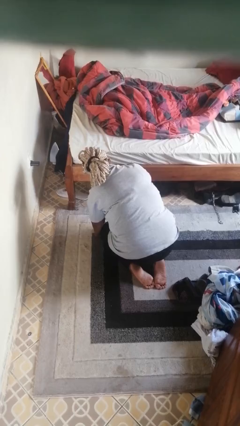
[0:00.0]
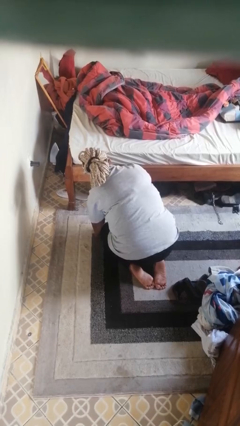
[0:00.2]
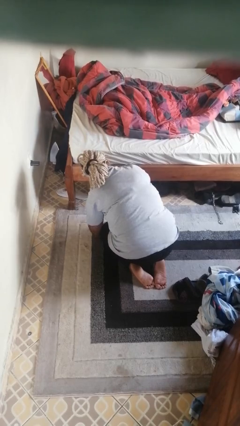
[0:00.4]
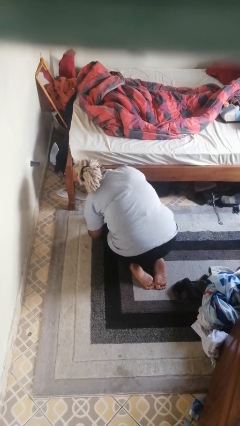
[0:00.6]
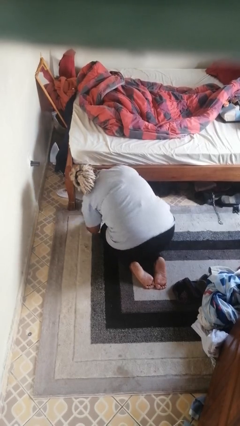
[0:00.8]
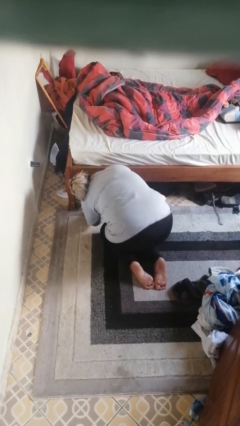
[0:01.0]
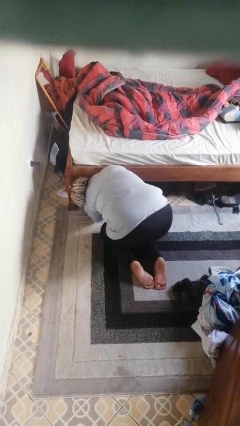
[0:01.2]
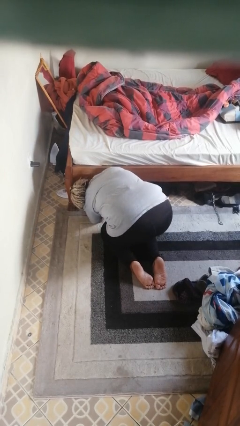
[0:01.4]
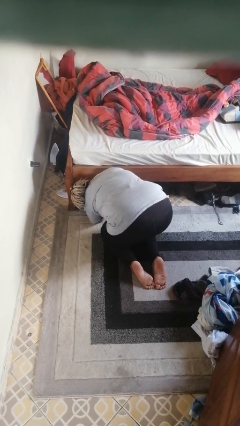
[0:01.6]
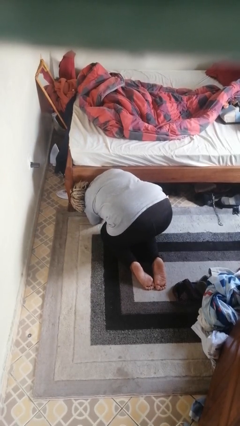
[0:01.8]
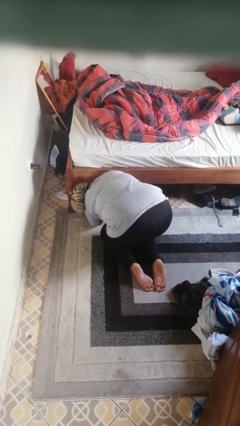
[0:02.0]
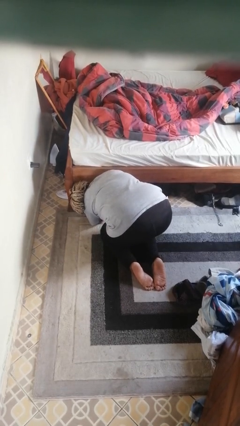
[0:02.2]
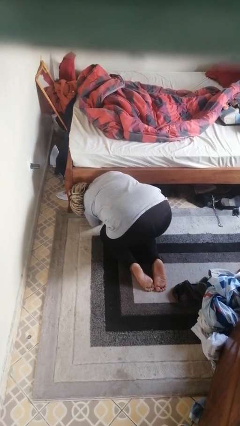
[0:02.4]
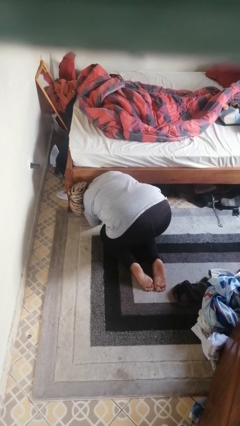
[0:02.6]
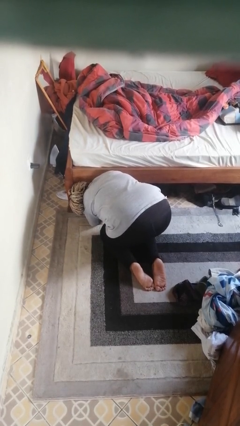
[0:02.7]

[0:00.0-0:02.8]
person searches under bed

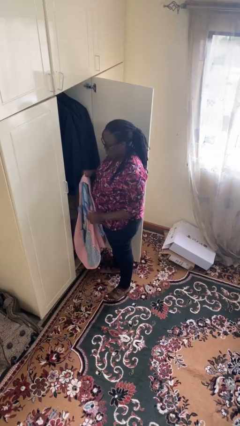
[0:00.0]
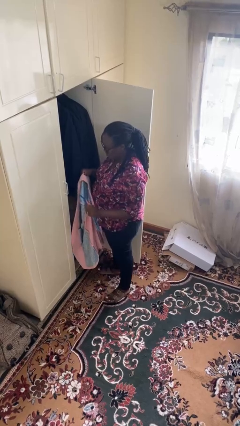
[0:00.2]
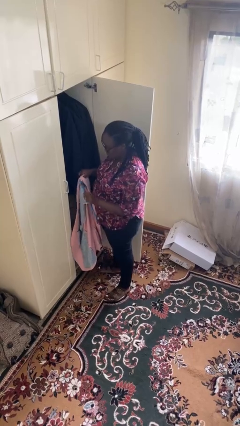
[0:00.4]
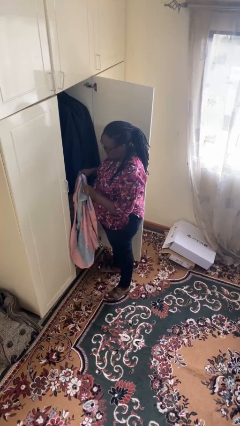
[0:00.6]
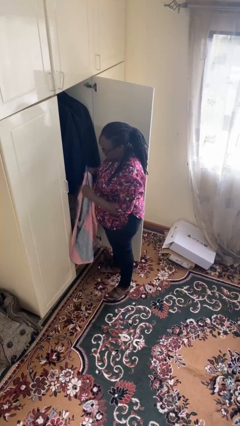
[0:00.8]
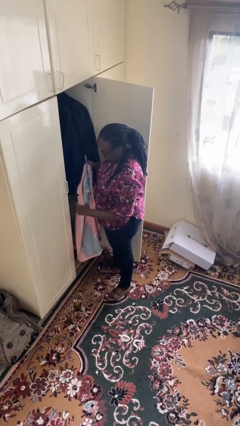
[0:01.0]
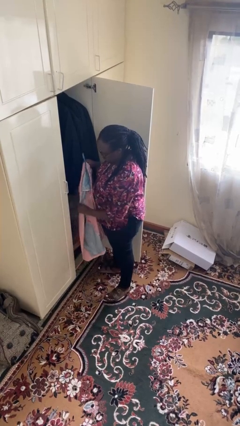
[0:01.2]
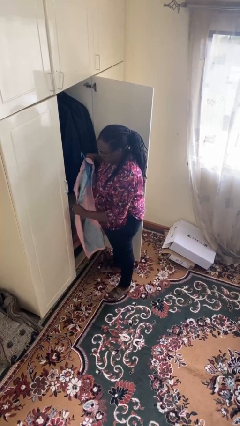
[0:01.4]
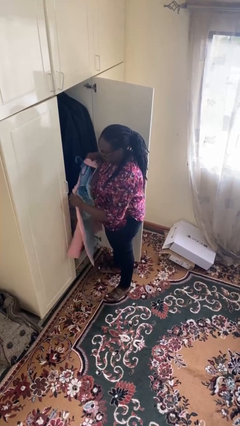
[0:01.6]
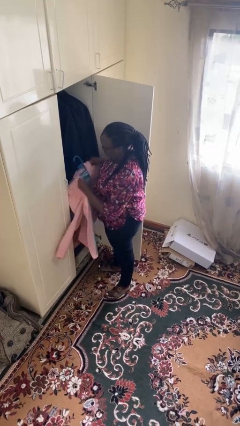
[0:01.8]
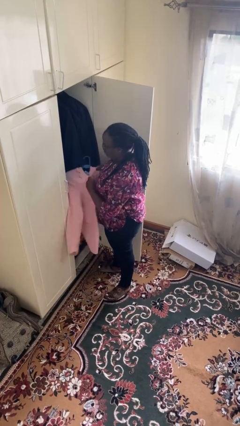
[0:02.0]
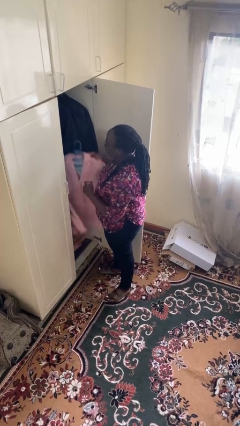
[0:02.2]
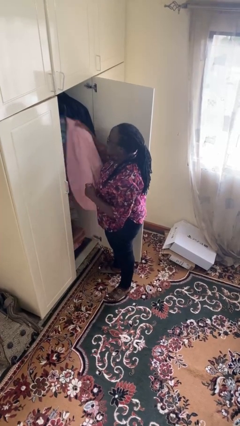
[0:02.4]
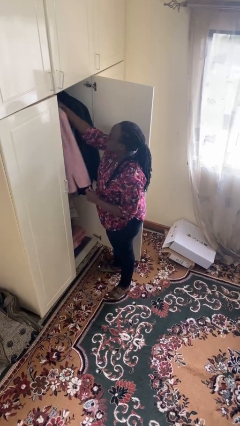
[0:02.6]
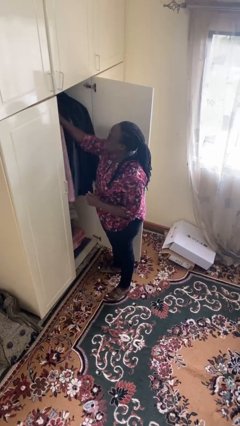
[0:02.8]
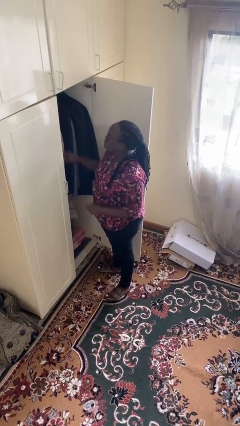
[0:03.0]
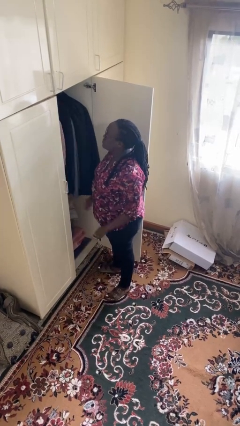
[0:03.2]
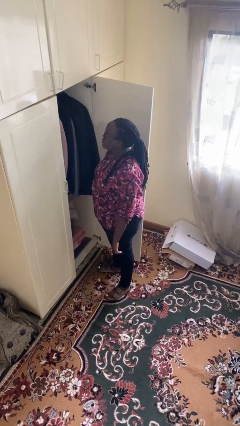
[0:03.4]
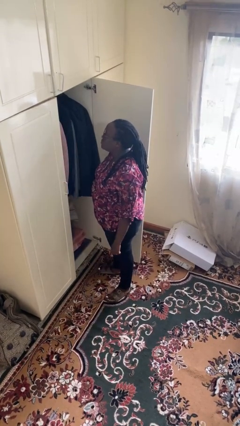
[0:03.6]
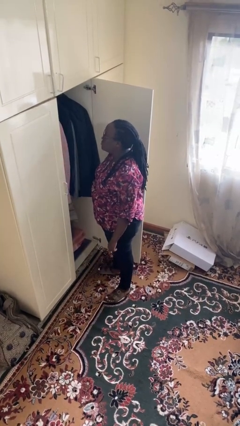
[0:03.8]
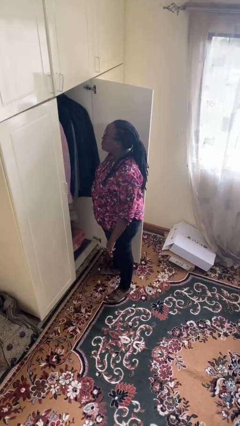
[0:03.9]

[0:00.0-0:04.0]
person puts clothes into closet

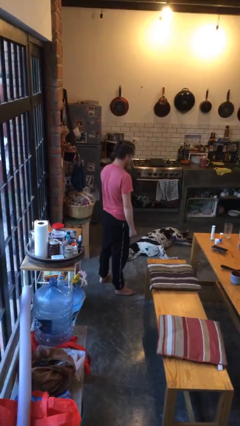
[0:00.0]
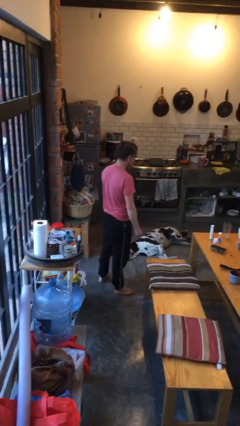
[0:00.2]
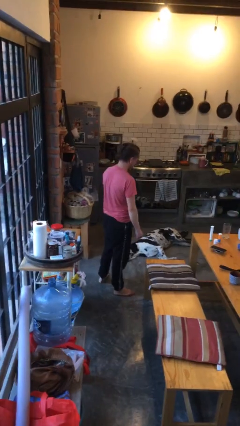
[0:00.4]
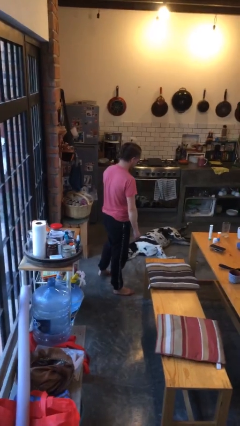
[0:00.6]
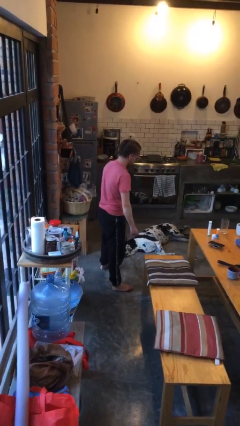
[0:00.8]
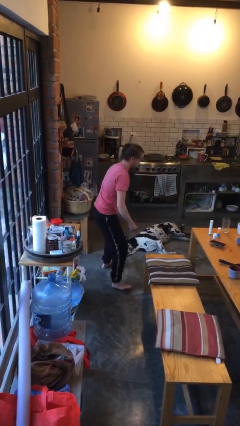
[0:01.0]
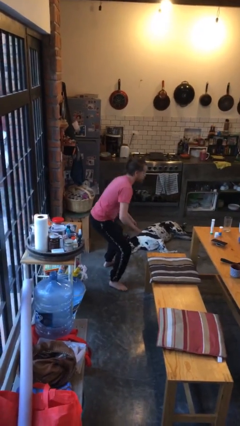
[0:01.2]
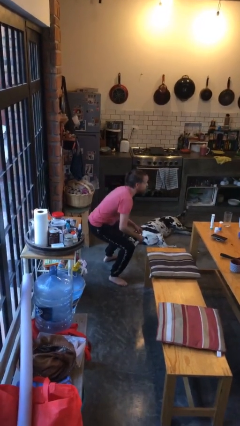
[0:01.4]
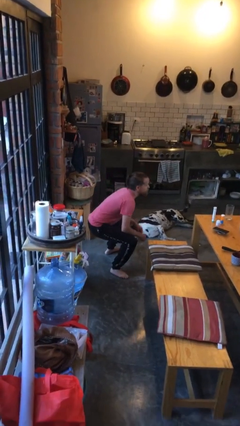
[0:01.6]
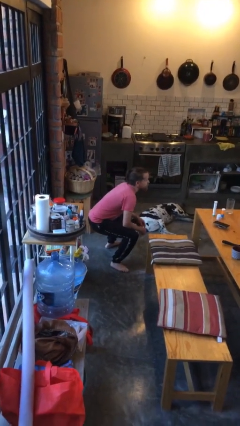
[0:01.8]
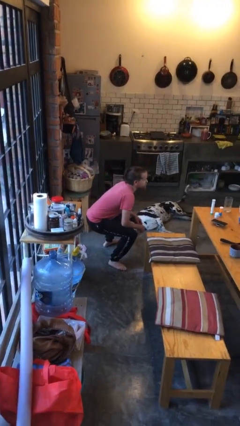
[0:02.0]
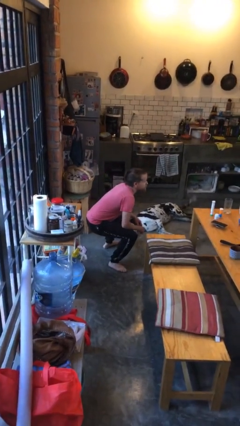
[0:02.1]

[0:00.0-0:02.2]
person squats

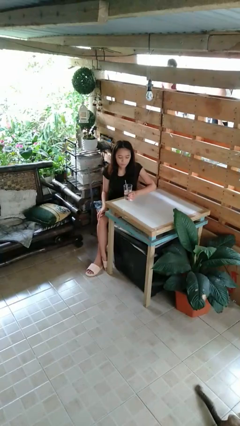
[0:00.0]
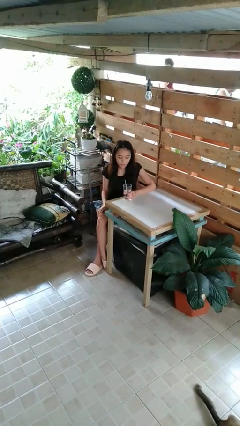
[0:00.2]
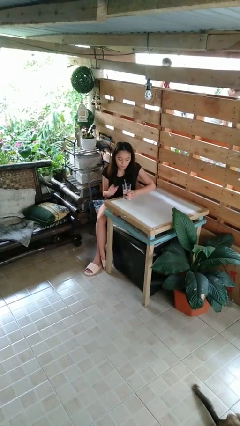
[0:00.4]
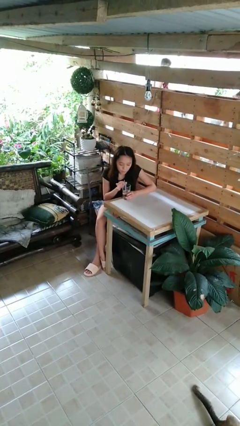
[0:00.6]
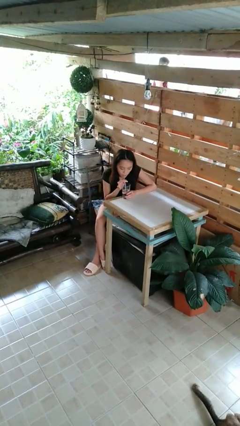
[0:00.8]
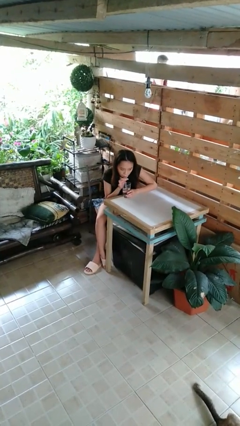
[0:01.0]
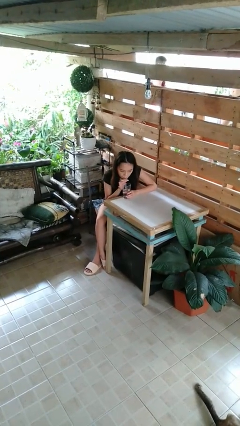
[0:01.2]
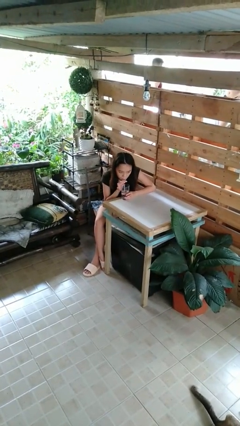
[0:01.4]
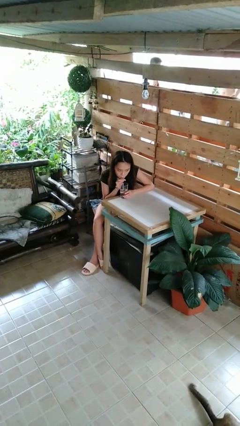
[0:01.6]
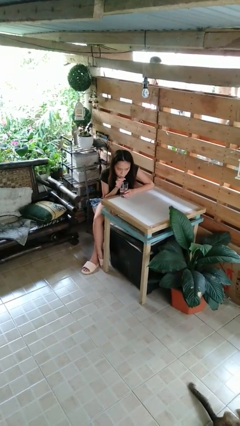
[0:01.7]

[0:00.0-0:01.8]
person drinks from straw

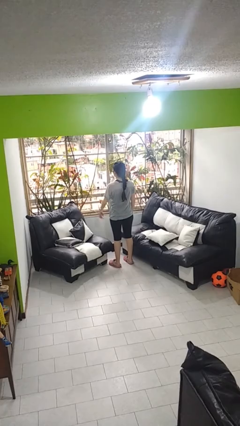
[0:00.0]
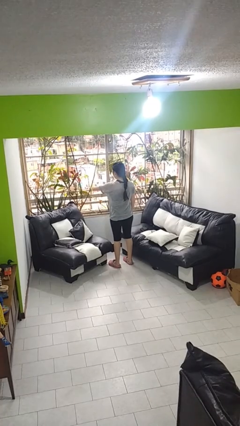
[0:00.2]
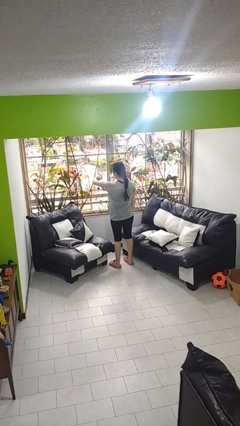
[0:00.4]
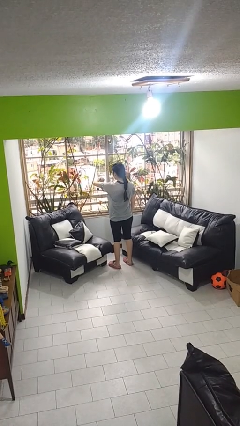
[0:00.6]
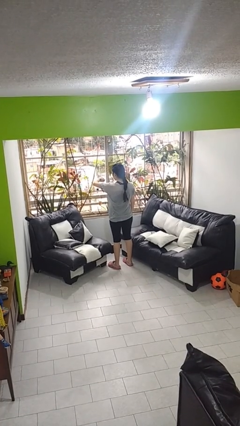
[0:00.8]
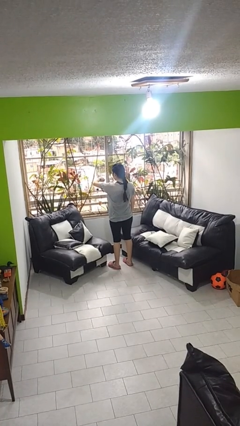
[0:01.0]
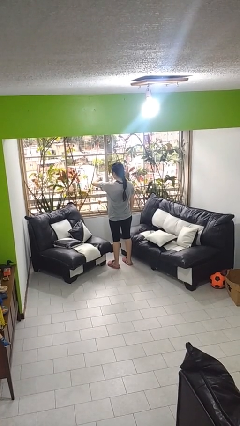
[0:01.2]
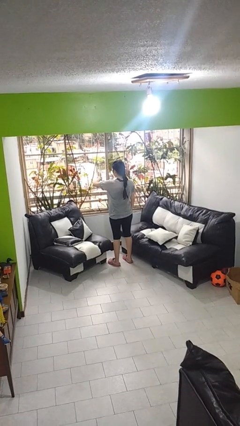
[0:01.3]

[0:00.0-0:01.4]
person looks at wristwatch

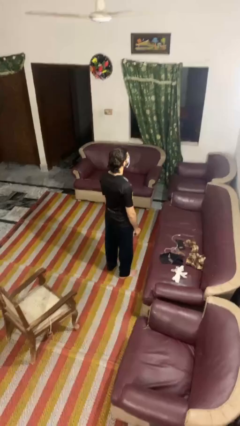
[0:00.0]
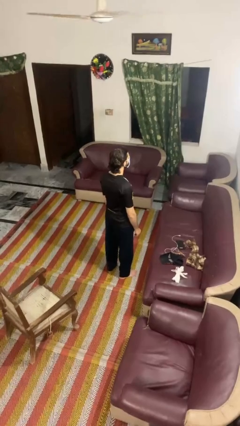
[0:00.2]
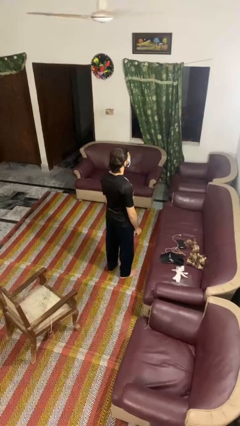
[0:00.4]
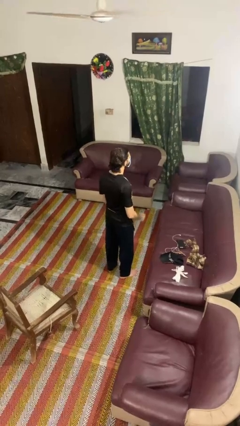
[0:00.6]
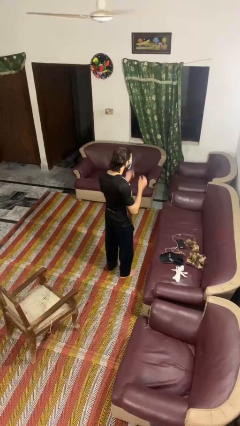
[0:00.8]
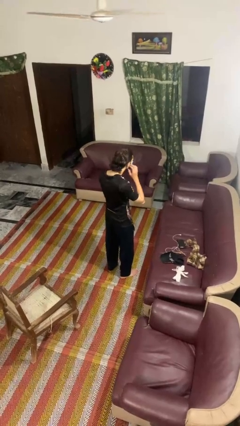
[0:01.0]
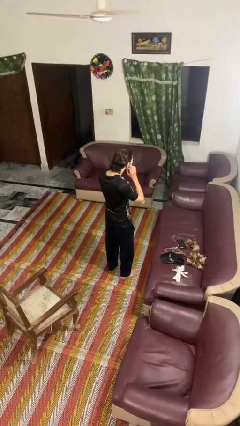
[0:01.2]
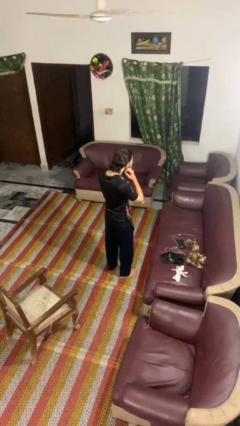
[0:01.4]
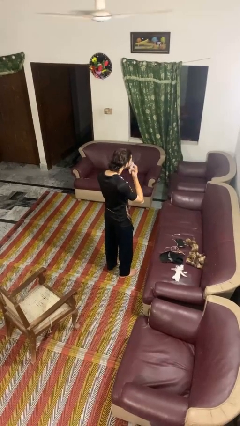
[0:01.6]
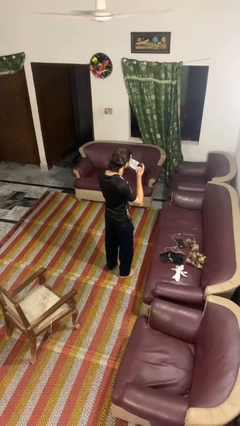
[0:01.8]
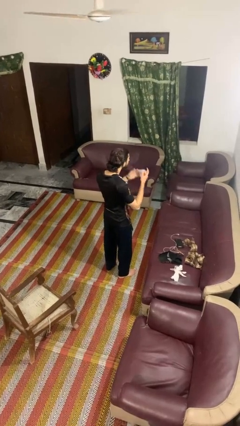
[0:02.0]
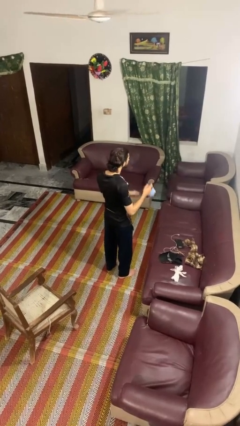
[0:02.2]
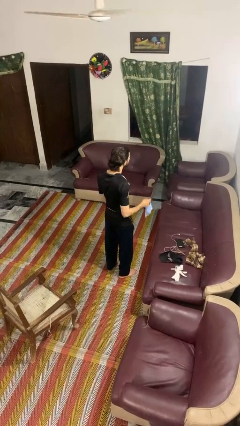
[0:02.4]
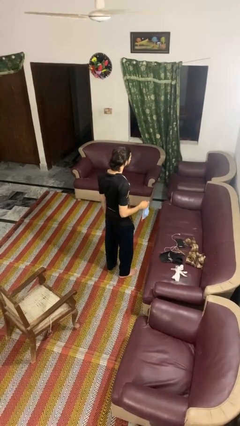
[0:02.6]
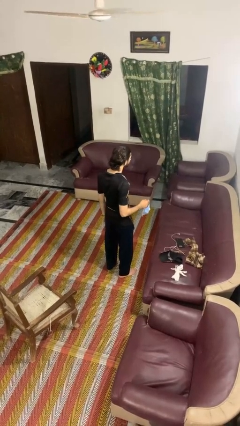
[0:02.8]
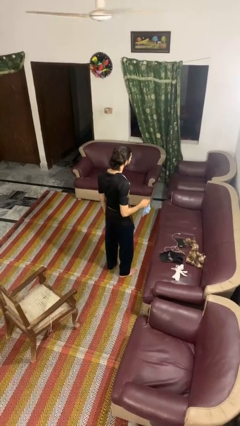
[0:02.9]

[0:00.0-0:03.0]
person takes off facemask

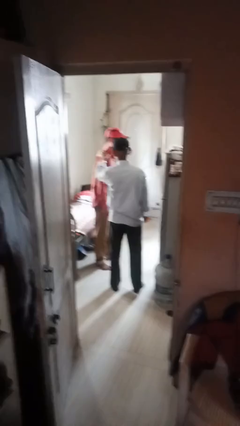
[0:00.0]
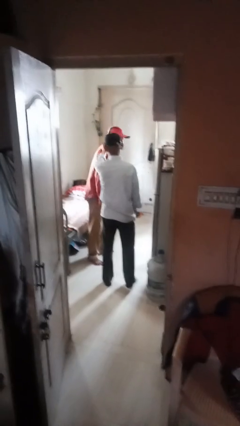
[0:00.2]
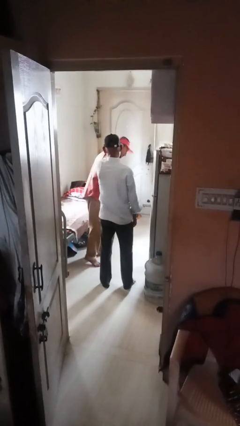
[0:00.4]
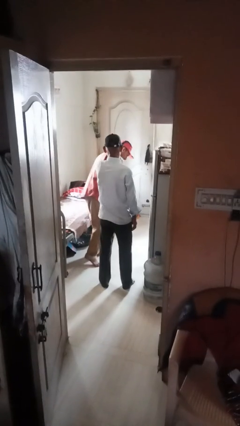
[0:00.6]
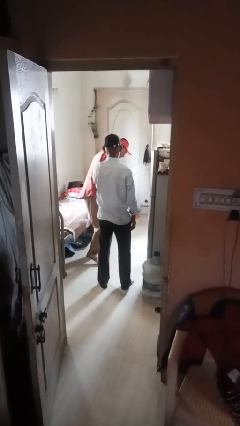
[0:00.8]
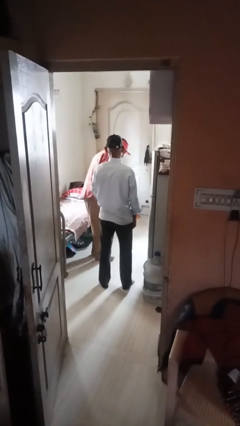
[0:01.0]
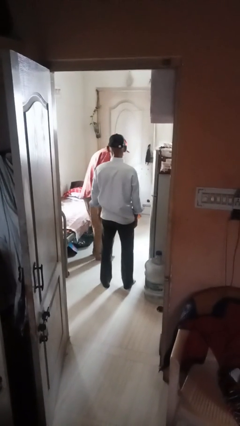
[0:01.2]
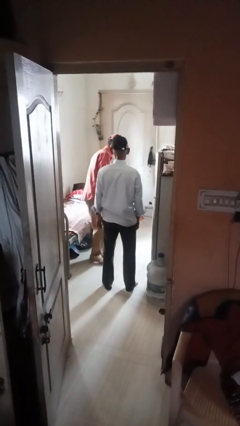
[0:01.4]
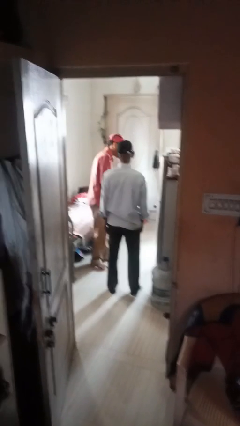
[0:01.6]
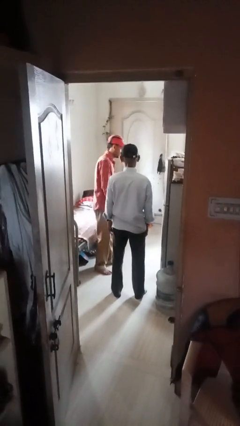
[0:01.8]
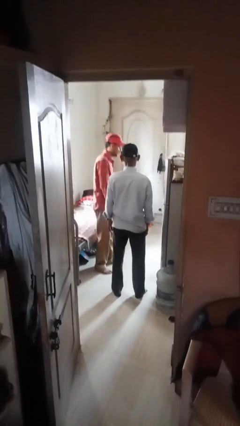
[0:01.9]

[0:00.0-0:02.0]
person shoves person

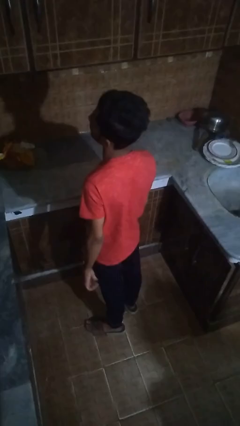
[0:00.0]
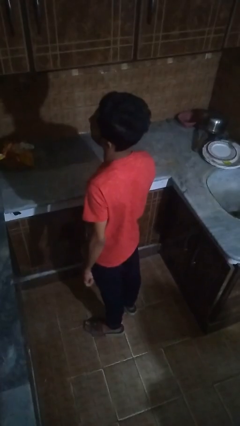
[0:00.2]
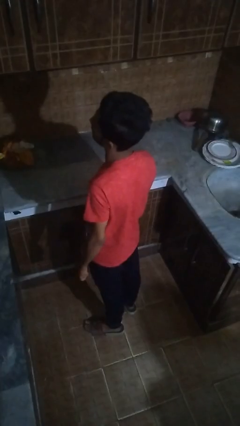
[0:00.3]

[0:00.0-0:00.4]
person closes cabinet
